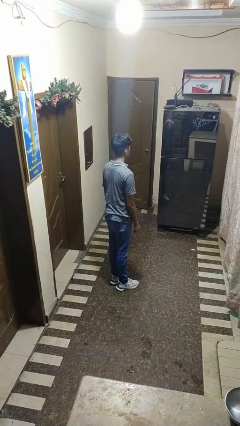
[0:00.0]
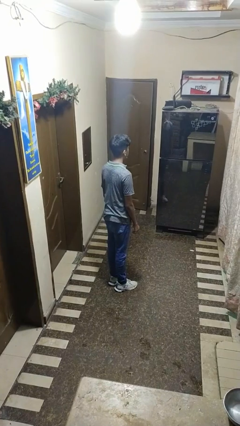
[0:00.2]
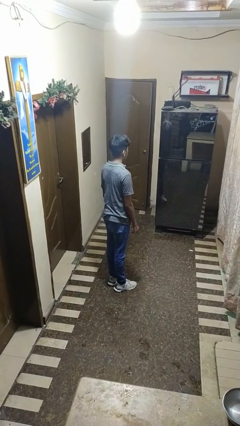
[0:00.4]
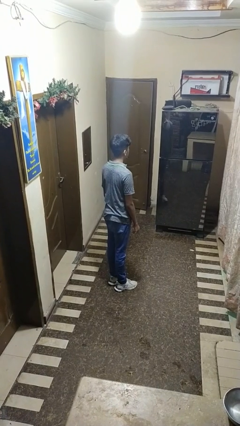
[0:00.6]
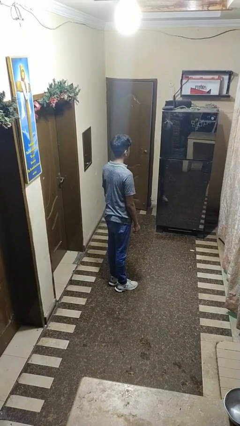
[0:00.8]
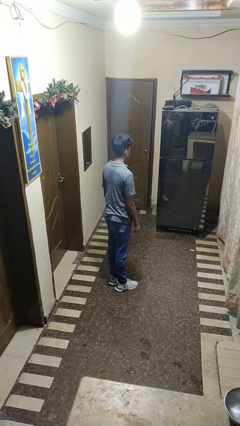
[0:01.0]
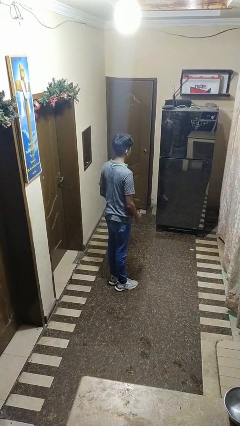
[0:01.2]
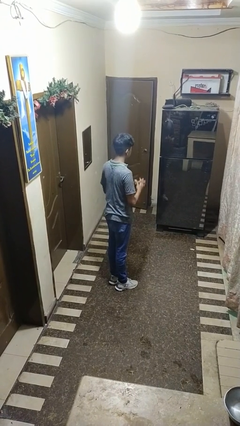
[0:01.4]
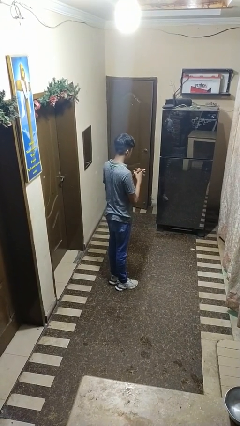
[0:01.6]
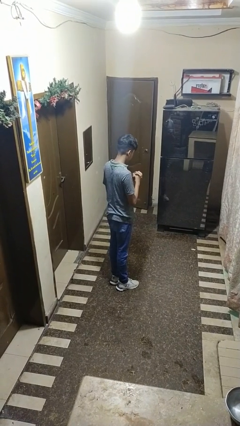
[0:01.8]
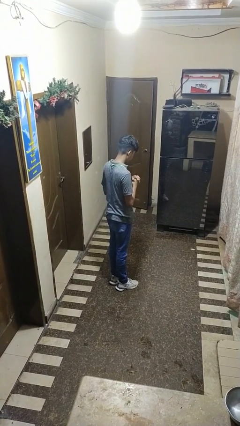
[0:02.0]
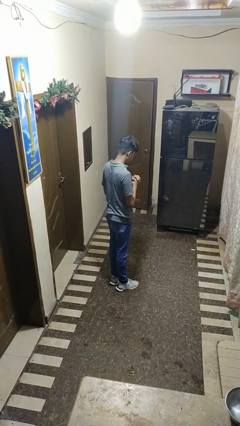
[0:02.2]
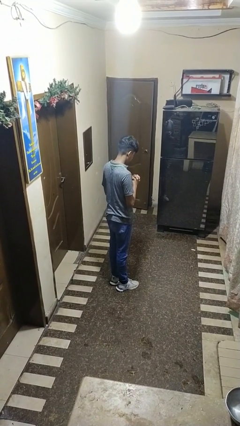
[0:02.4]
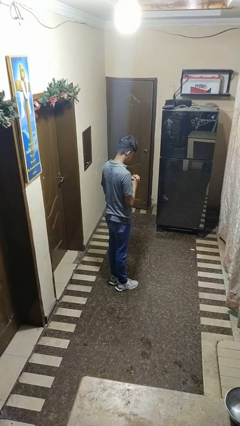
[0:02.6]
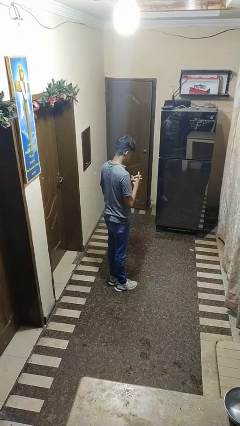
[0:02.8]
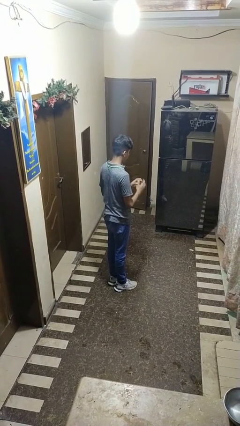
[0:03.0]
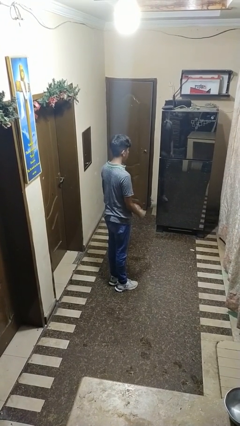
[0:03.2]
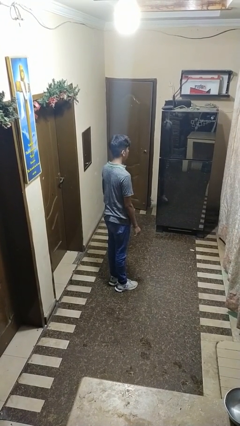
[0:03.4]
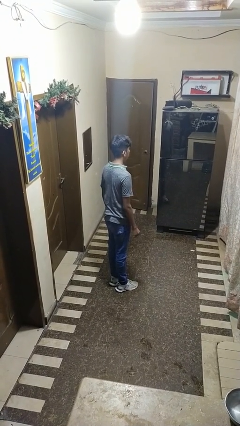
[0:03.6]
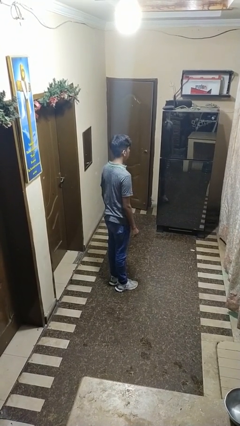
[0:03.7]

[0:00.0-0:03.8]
person prays

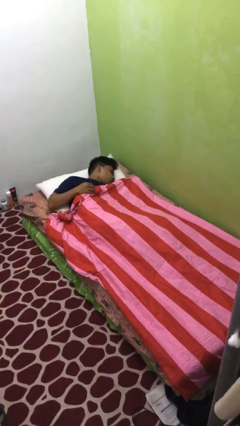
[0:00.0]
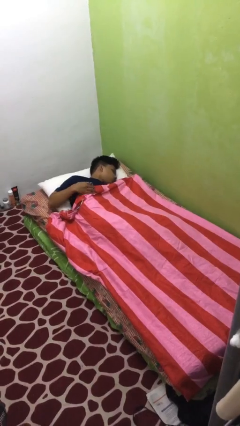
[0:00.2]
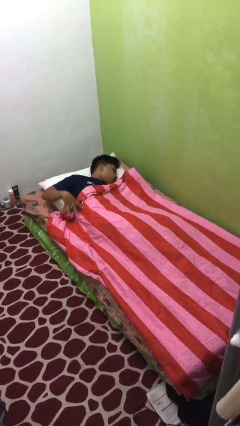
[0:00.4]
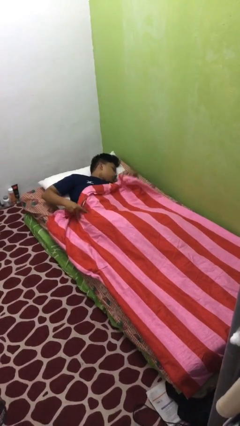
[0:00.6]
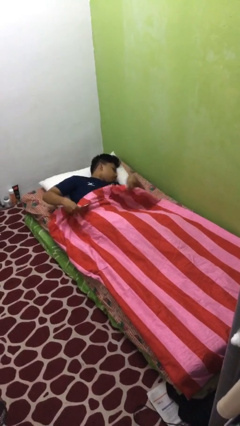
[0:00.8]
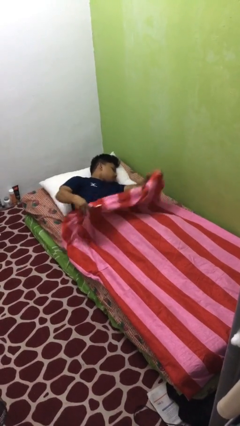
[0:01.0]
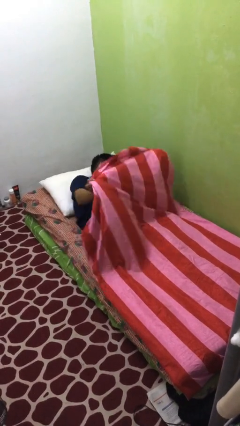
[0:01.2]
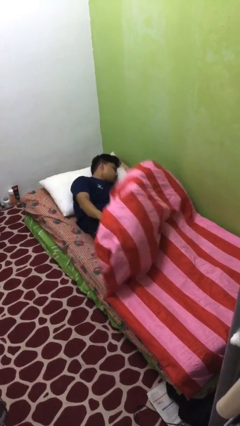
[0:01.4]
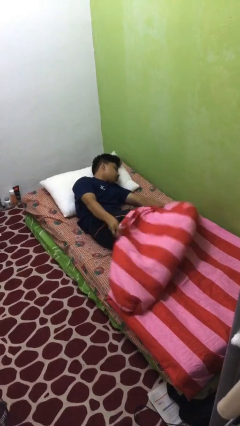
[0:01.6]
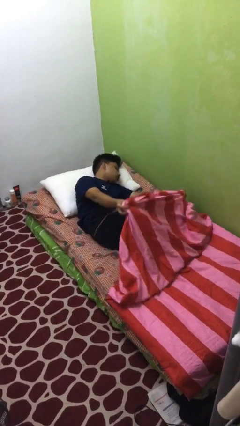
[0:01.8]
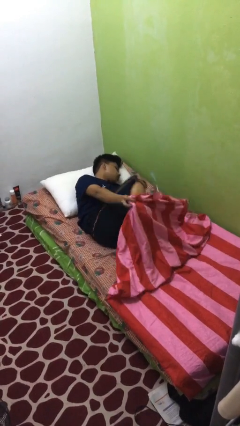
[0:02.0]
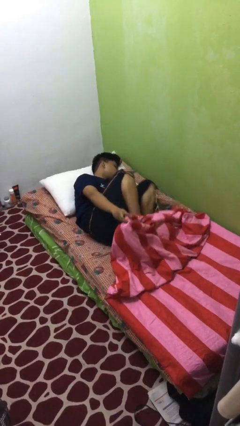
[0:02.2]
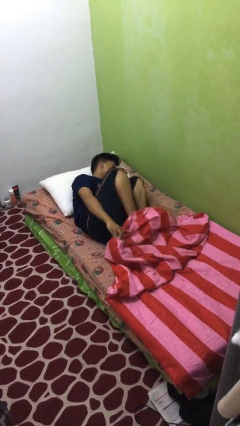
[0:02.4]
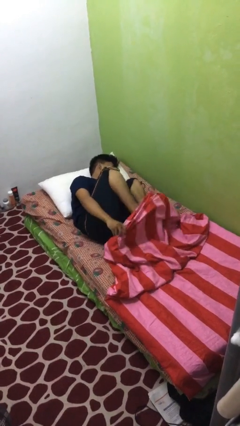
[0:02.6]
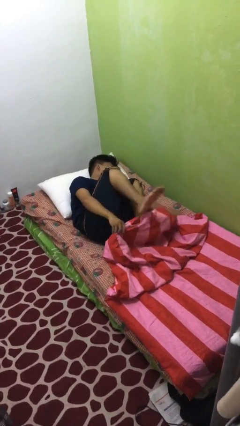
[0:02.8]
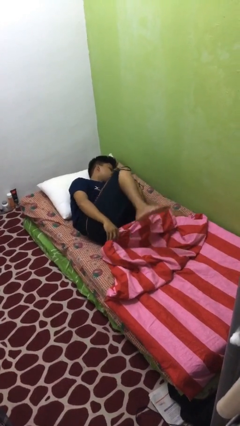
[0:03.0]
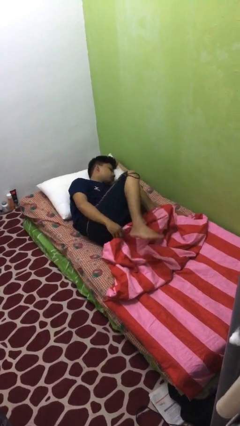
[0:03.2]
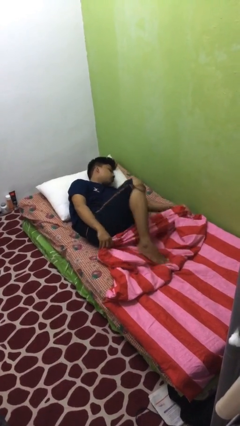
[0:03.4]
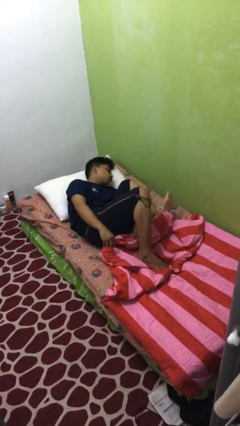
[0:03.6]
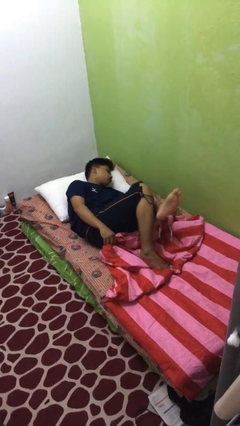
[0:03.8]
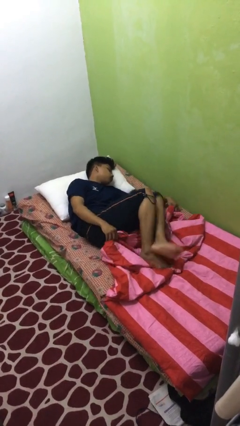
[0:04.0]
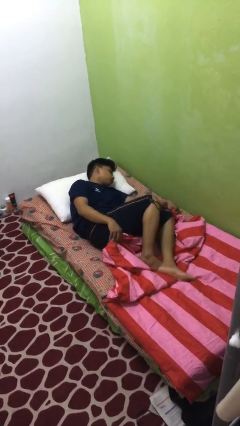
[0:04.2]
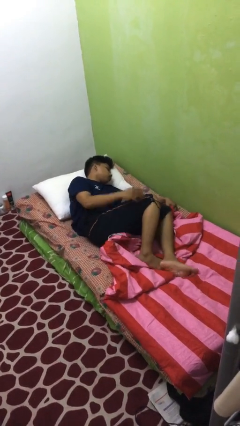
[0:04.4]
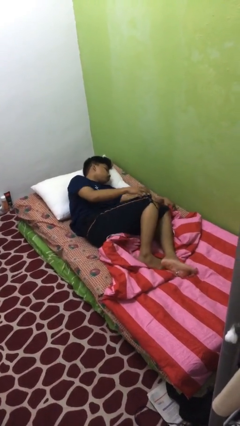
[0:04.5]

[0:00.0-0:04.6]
person uncovers with bedsheets

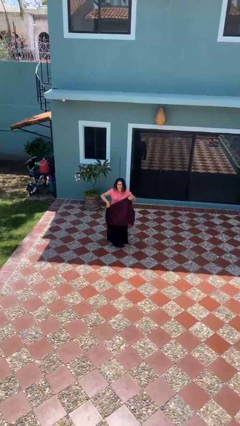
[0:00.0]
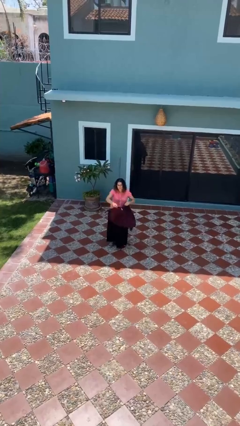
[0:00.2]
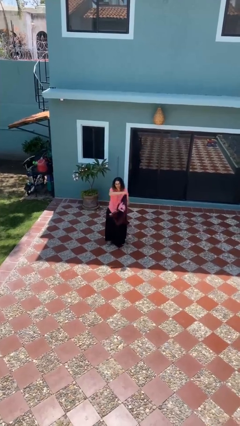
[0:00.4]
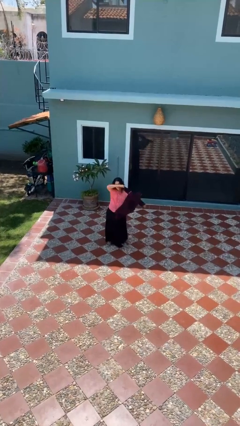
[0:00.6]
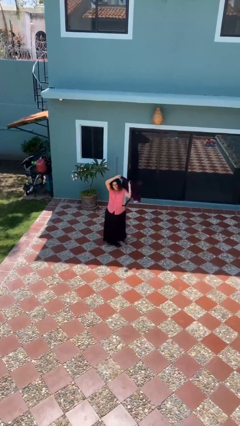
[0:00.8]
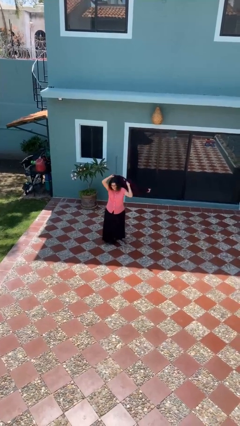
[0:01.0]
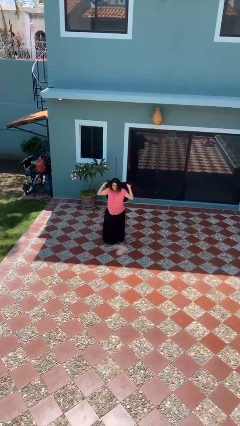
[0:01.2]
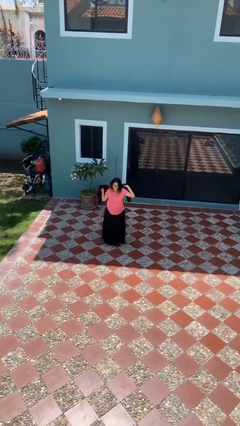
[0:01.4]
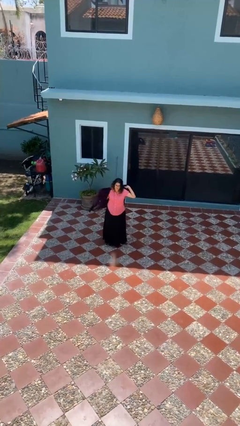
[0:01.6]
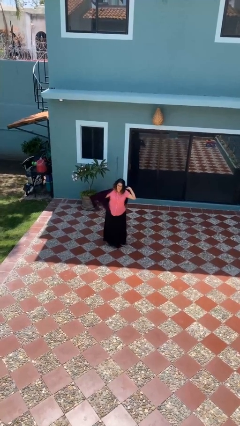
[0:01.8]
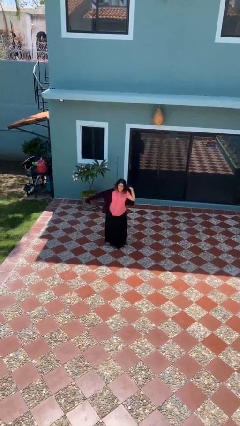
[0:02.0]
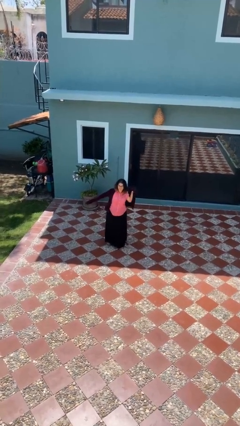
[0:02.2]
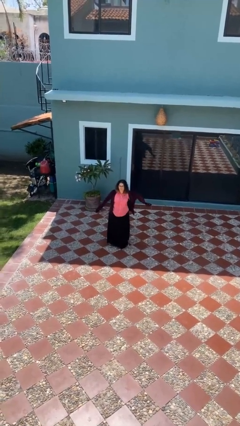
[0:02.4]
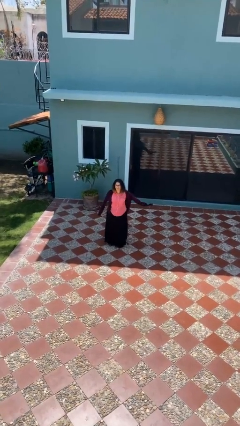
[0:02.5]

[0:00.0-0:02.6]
person puts on jacket

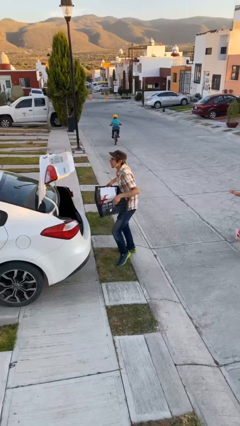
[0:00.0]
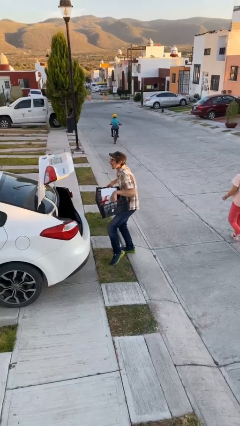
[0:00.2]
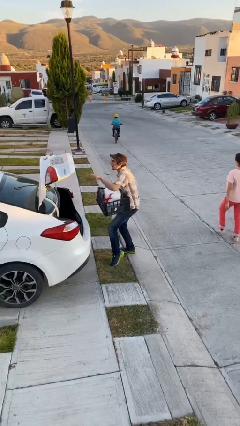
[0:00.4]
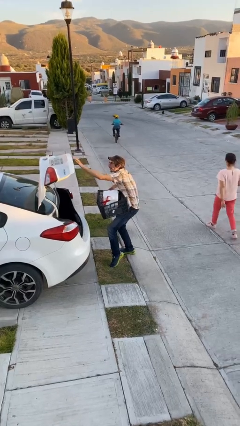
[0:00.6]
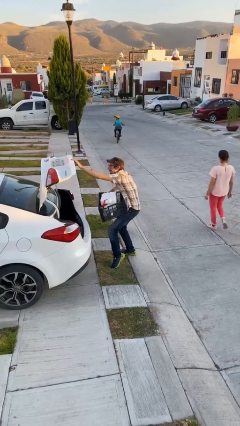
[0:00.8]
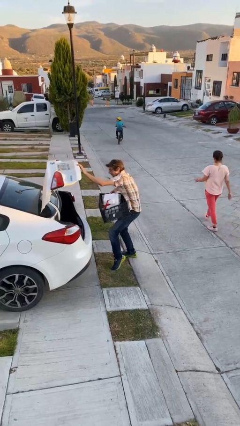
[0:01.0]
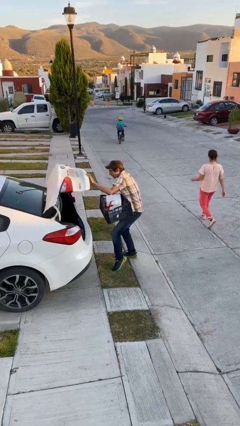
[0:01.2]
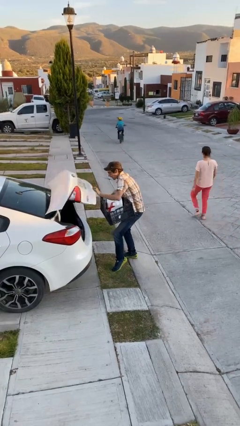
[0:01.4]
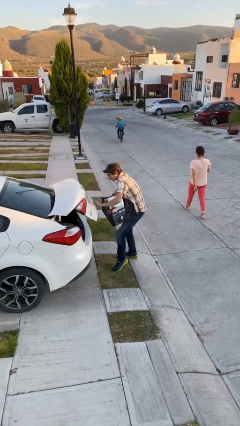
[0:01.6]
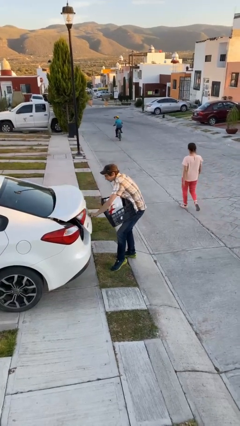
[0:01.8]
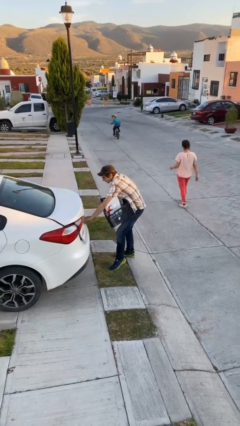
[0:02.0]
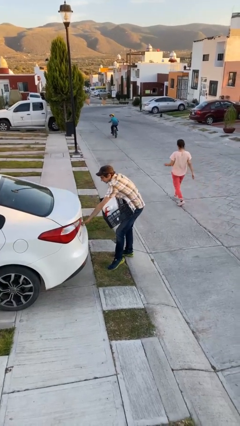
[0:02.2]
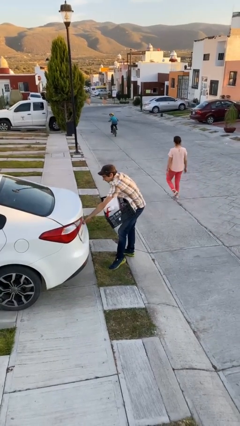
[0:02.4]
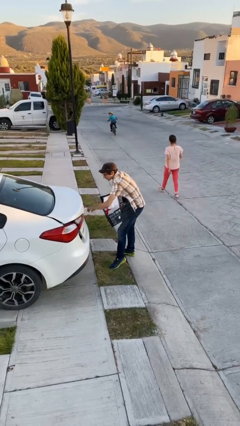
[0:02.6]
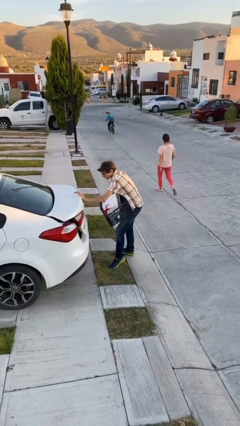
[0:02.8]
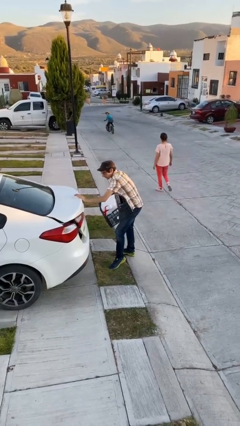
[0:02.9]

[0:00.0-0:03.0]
person closes car trunk

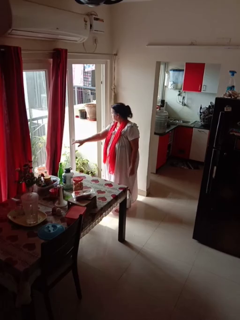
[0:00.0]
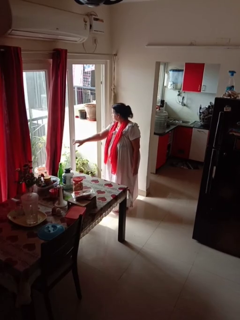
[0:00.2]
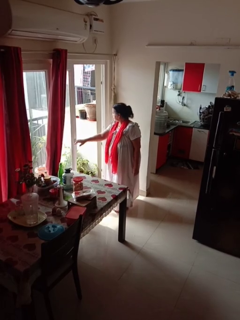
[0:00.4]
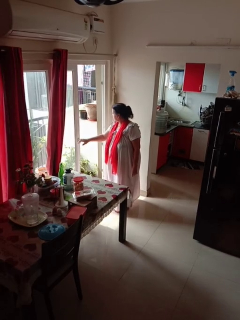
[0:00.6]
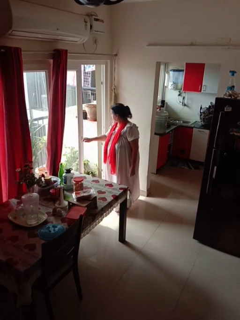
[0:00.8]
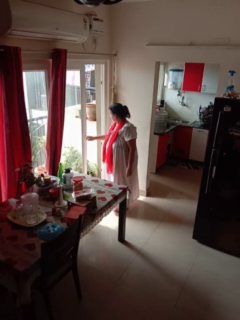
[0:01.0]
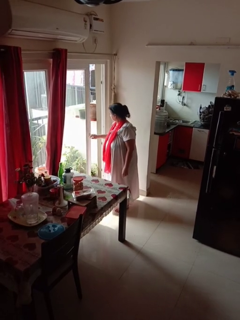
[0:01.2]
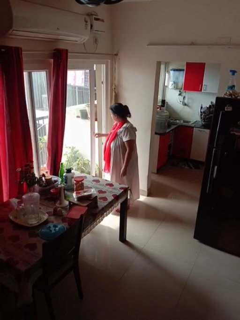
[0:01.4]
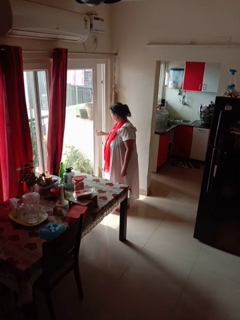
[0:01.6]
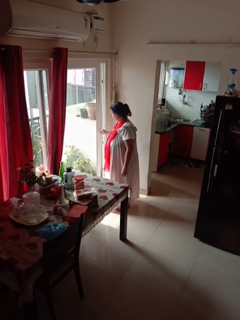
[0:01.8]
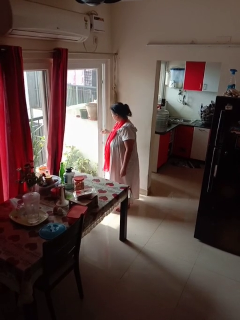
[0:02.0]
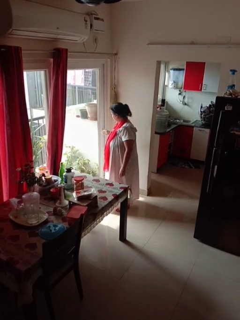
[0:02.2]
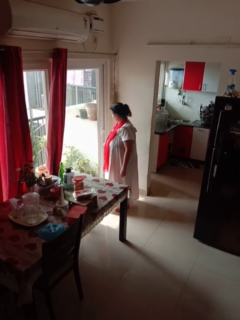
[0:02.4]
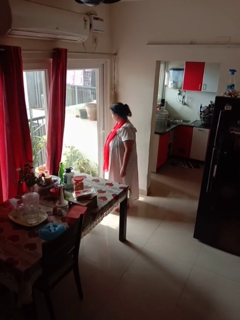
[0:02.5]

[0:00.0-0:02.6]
person closes sliding door

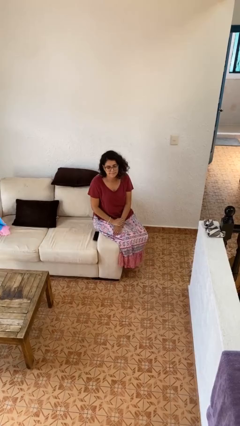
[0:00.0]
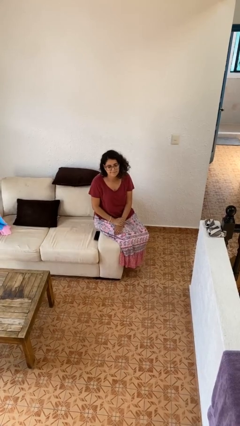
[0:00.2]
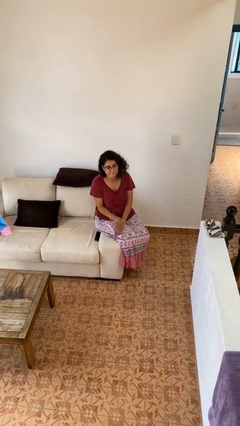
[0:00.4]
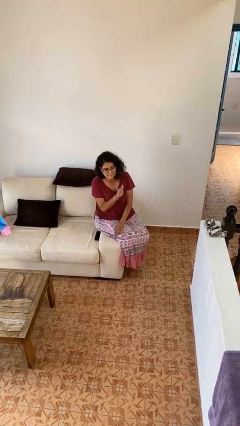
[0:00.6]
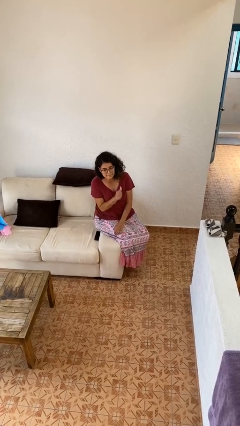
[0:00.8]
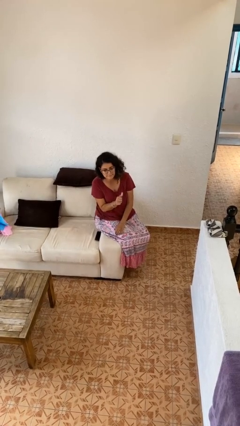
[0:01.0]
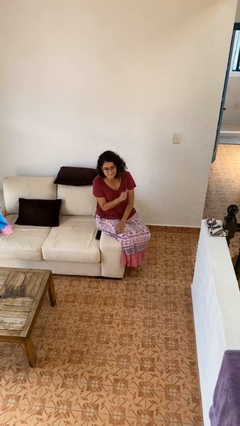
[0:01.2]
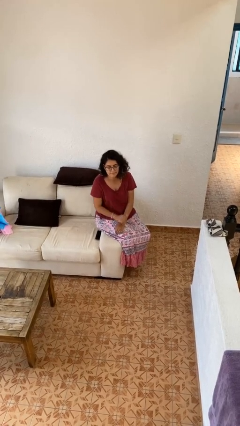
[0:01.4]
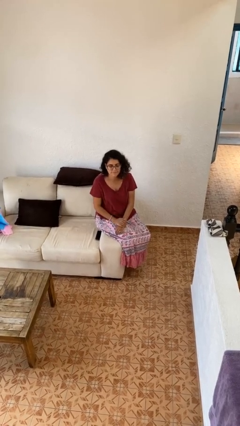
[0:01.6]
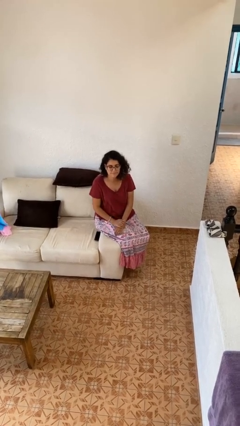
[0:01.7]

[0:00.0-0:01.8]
person gestures behind me
